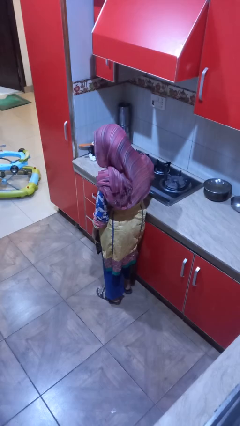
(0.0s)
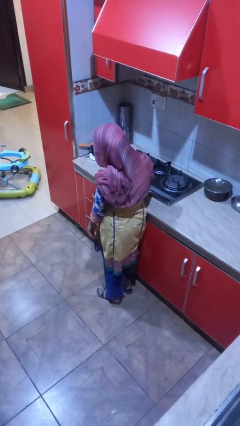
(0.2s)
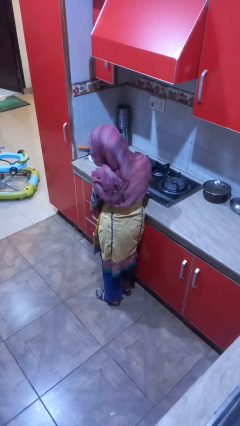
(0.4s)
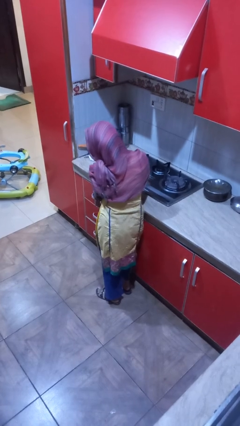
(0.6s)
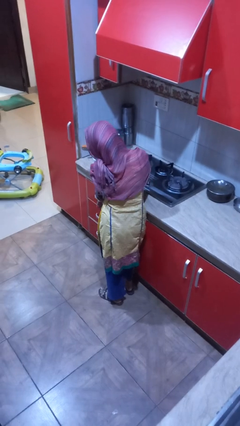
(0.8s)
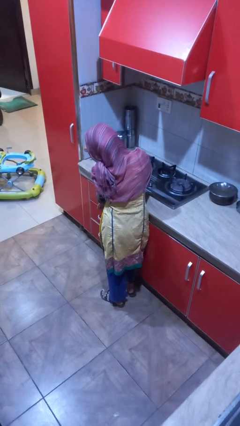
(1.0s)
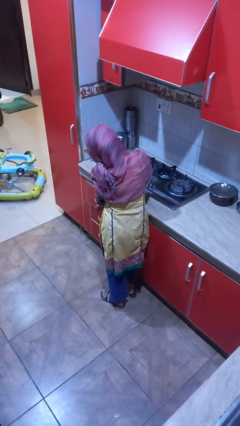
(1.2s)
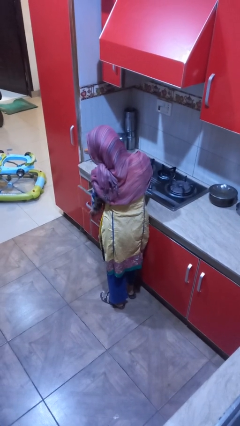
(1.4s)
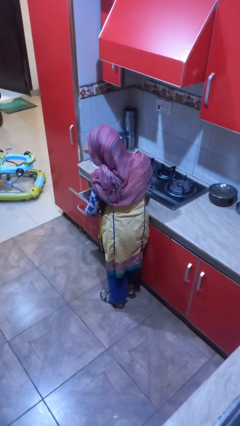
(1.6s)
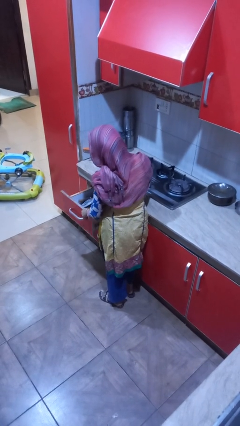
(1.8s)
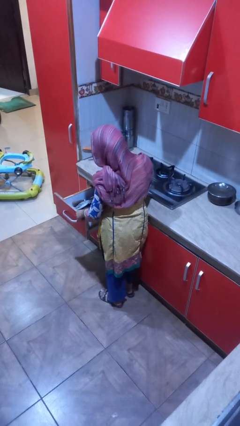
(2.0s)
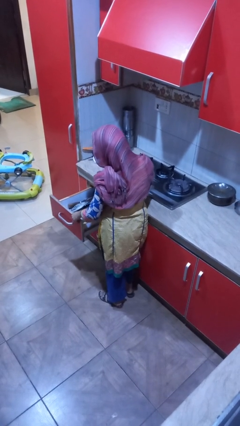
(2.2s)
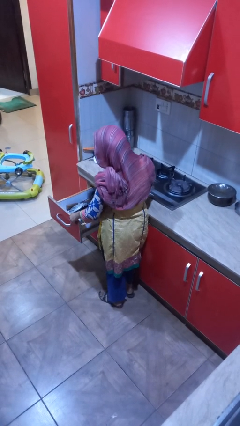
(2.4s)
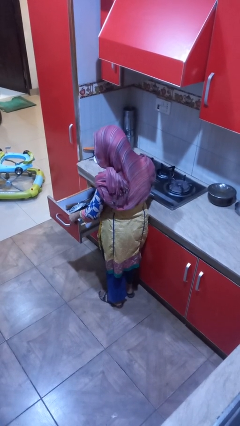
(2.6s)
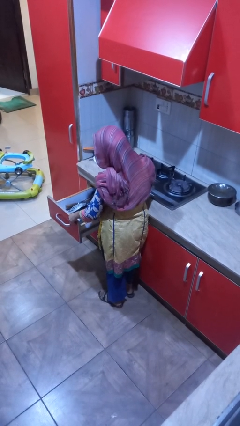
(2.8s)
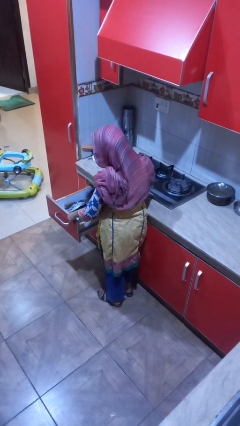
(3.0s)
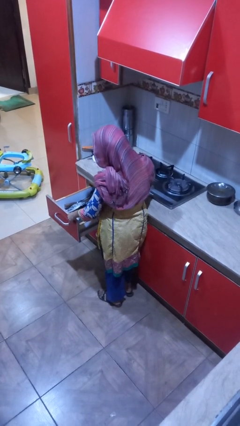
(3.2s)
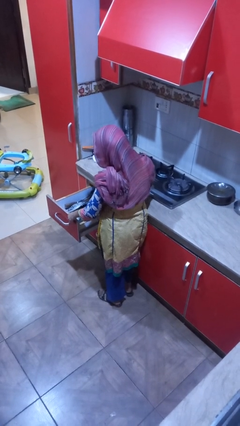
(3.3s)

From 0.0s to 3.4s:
person opens kitchen drawer

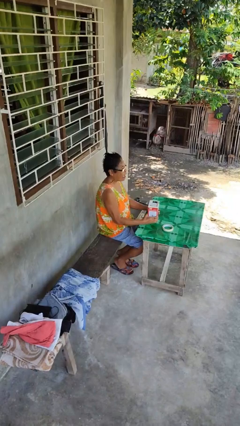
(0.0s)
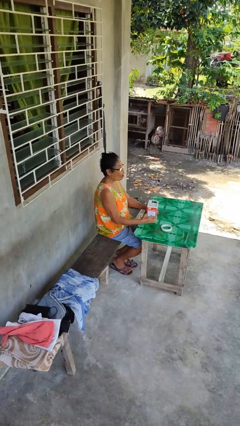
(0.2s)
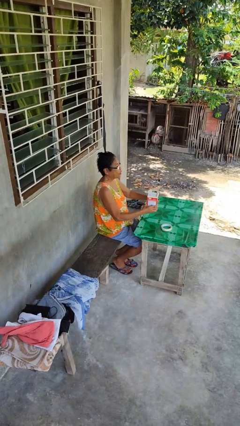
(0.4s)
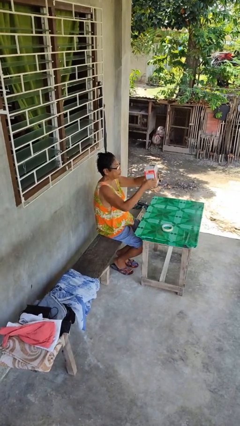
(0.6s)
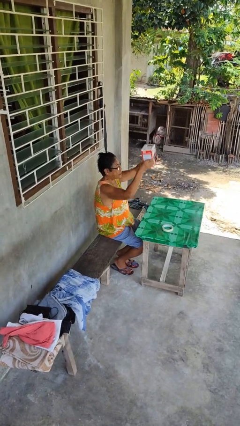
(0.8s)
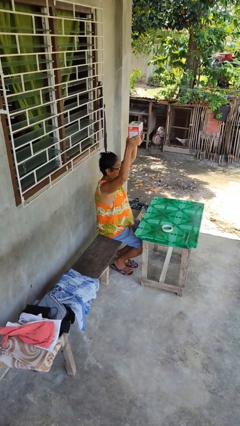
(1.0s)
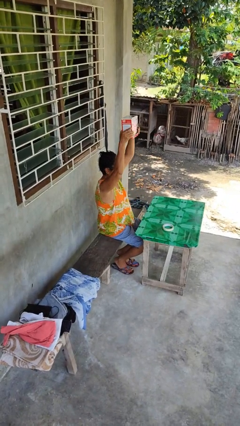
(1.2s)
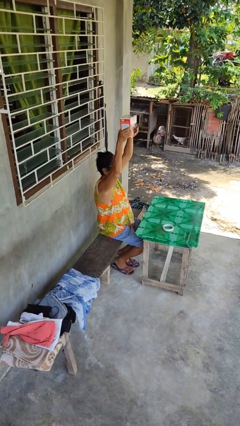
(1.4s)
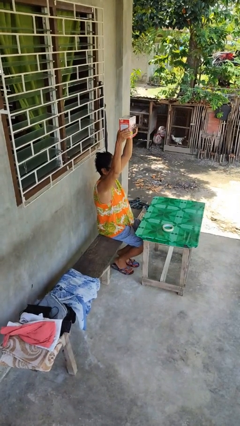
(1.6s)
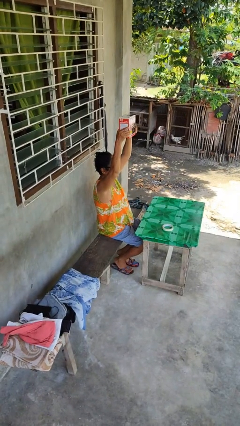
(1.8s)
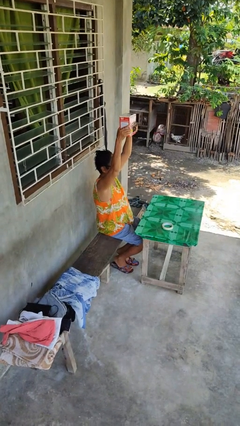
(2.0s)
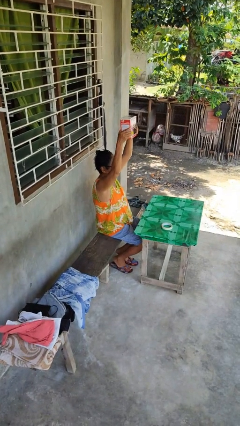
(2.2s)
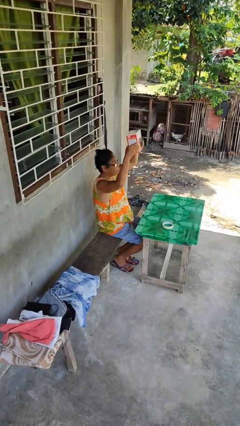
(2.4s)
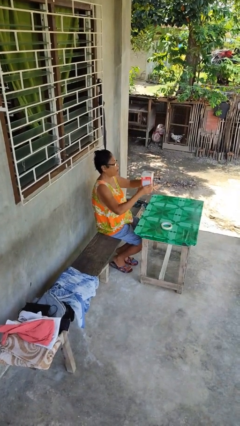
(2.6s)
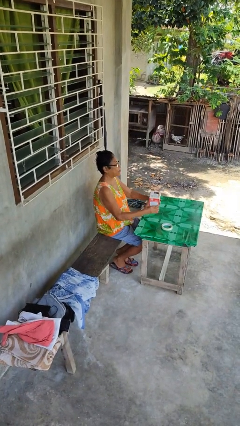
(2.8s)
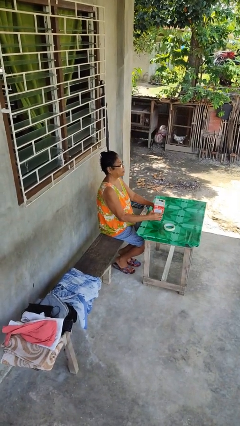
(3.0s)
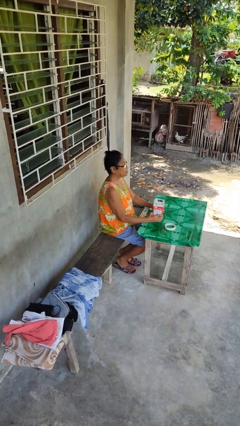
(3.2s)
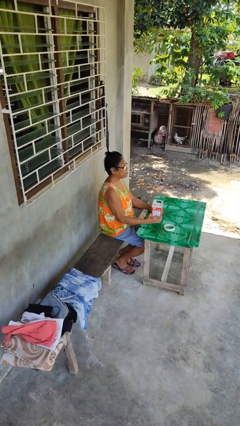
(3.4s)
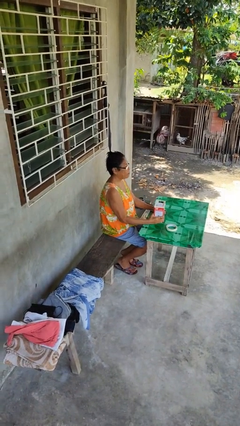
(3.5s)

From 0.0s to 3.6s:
person holds object above head

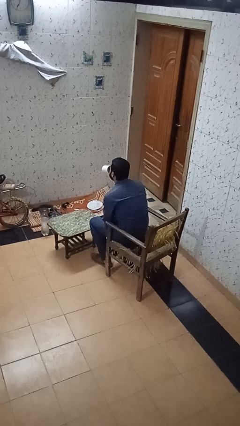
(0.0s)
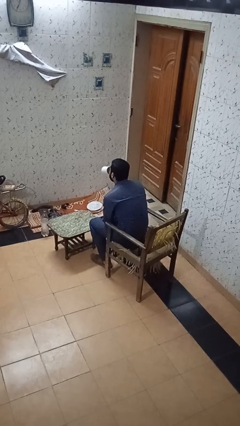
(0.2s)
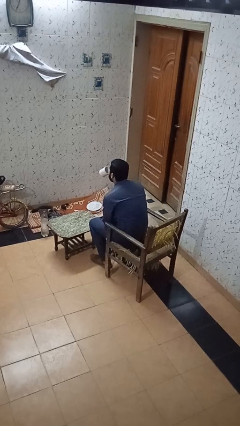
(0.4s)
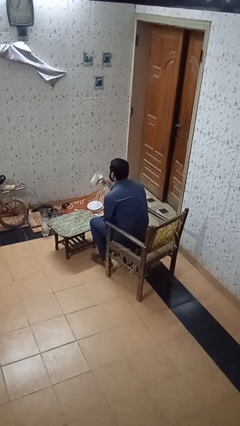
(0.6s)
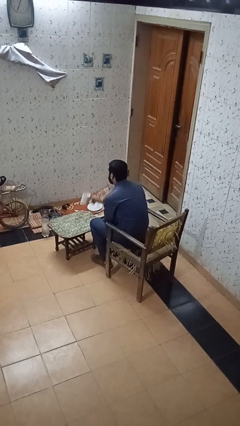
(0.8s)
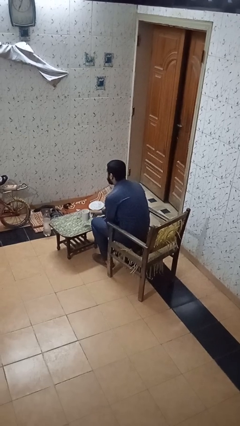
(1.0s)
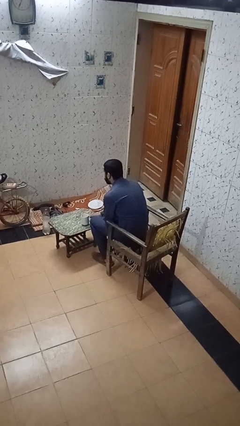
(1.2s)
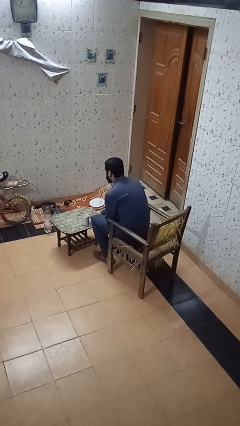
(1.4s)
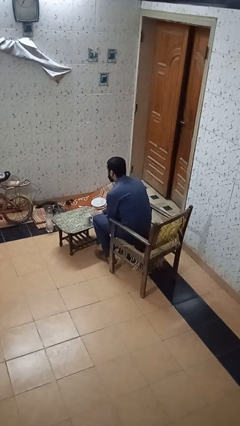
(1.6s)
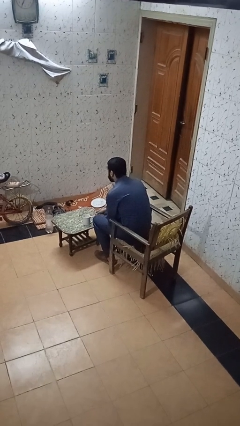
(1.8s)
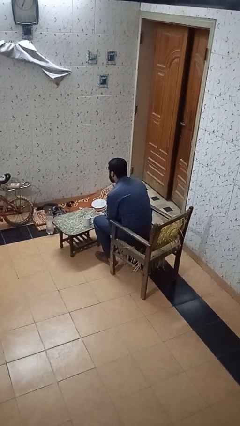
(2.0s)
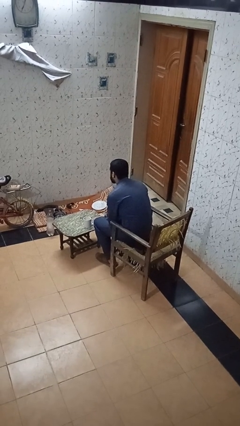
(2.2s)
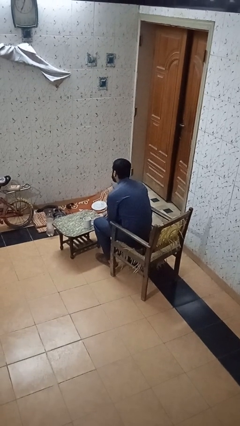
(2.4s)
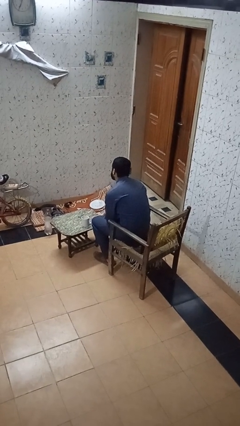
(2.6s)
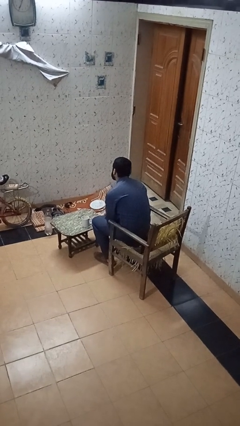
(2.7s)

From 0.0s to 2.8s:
person puts down object on table

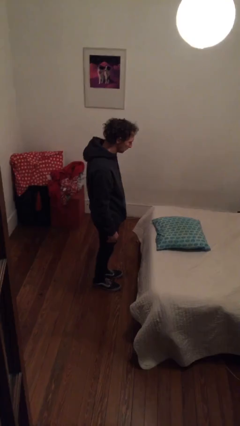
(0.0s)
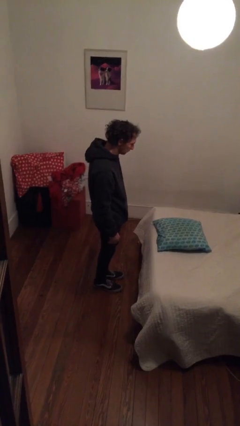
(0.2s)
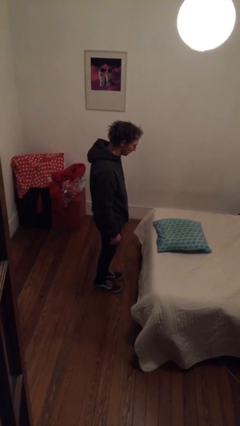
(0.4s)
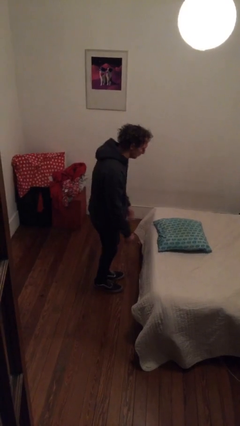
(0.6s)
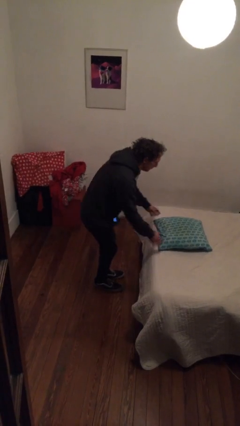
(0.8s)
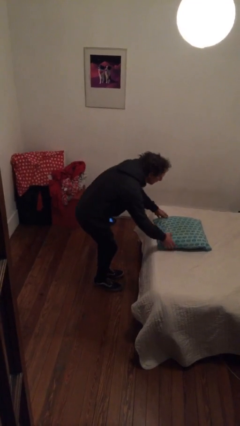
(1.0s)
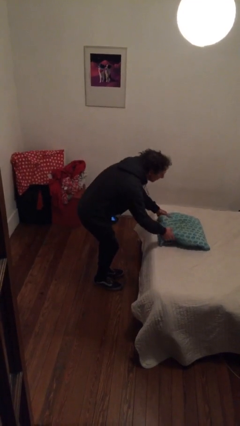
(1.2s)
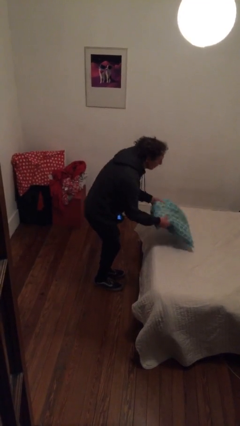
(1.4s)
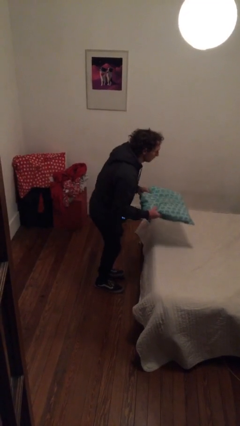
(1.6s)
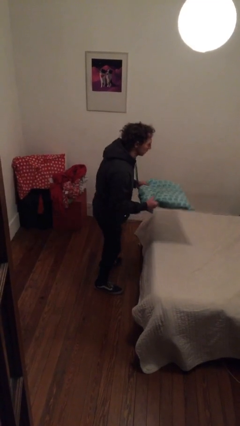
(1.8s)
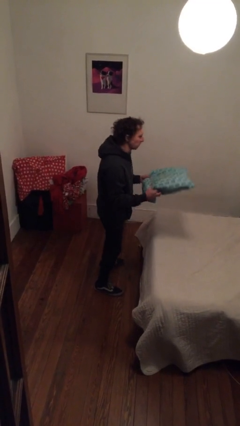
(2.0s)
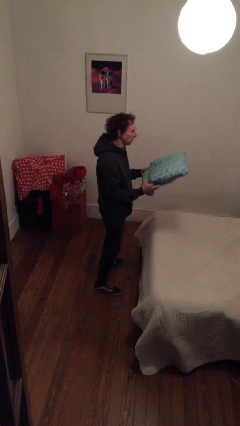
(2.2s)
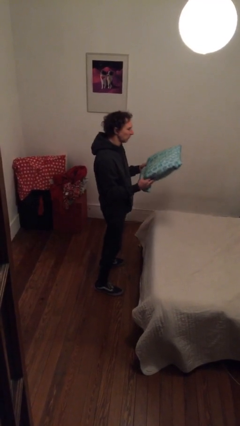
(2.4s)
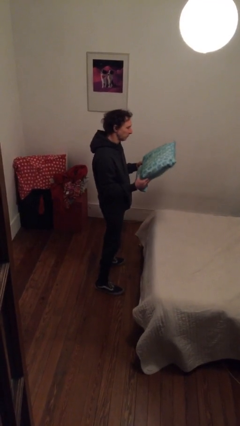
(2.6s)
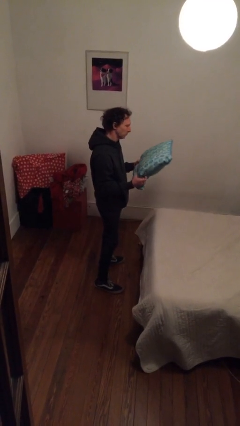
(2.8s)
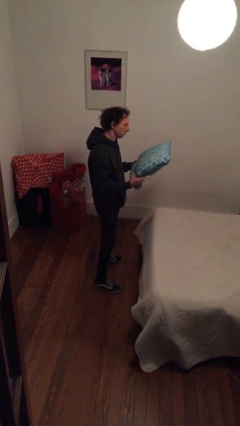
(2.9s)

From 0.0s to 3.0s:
person picks up object from bed

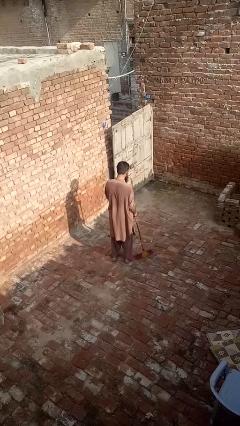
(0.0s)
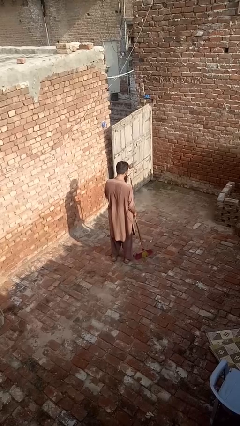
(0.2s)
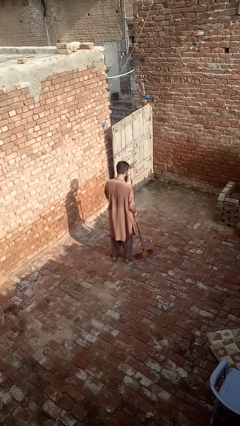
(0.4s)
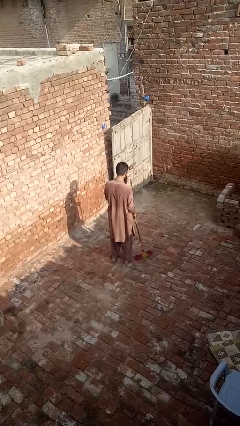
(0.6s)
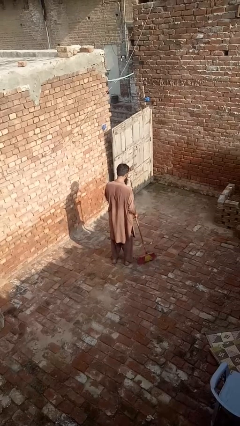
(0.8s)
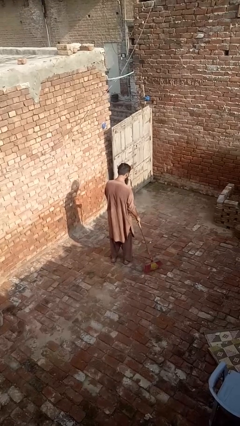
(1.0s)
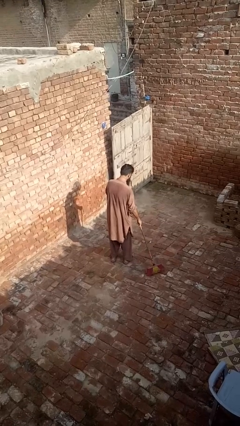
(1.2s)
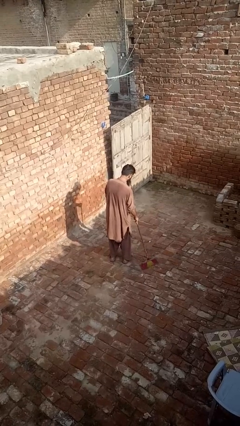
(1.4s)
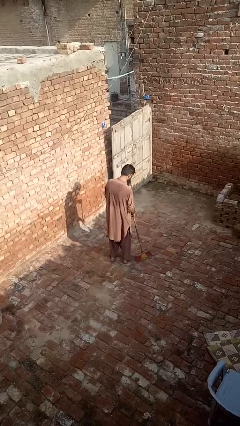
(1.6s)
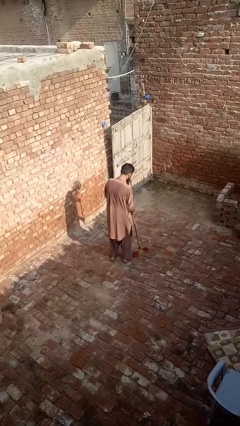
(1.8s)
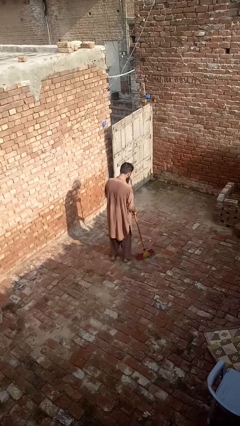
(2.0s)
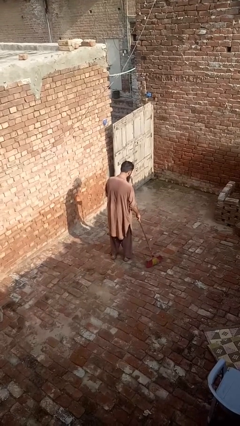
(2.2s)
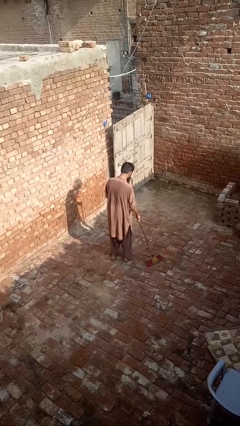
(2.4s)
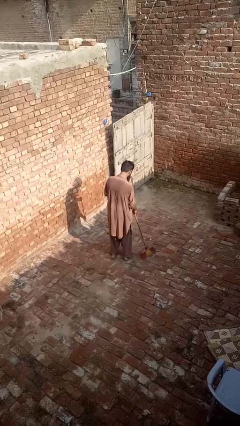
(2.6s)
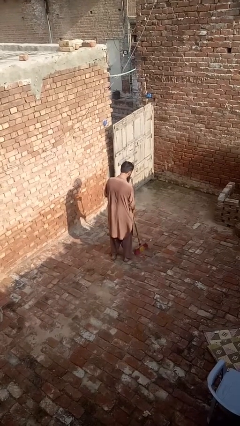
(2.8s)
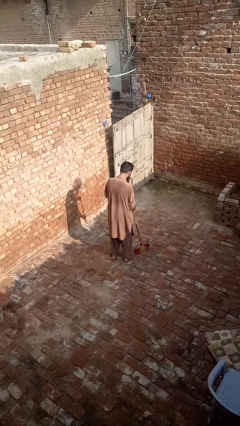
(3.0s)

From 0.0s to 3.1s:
person sweeps floor

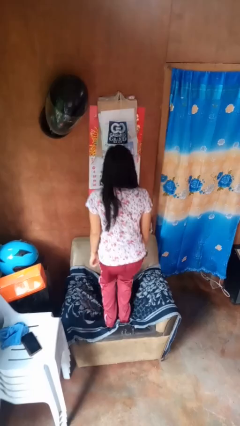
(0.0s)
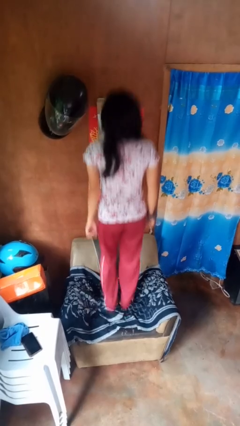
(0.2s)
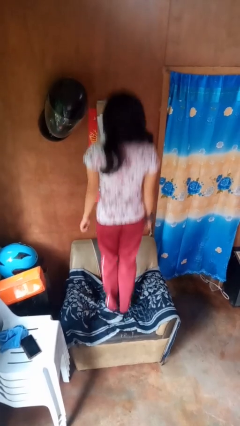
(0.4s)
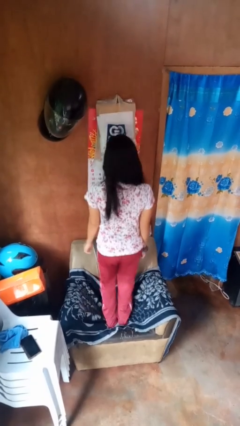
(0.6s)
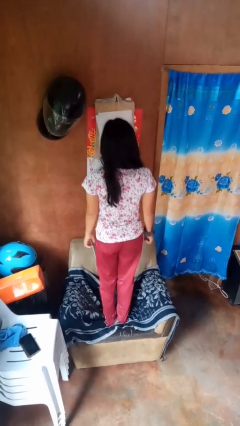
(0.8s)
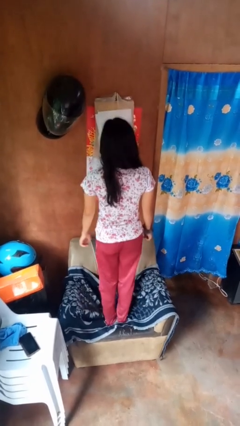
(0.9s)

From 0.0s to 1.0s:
person jumps on couch

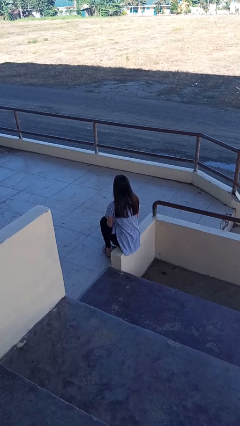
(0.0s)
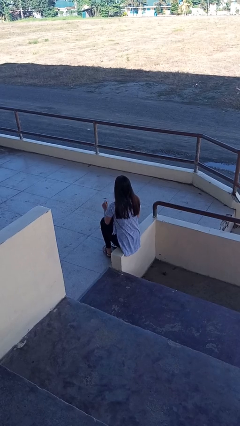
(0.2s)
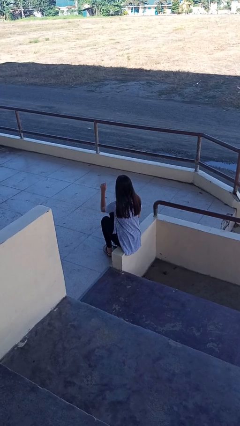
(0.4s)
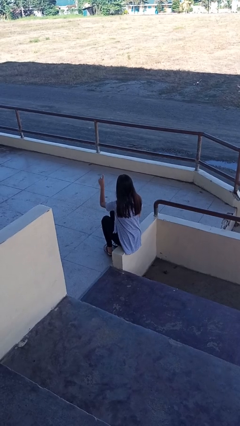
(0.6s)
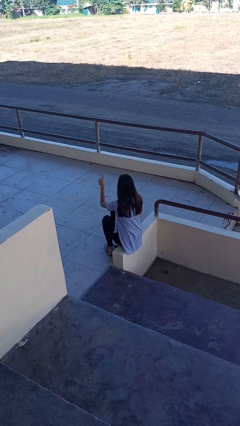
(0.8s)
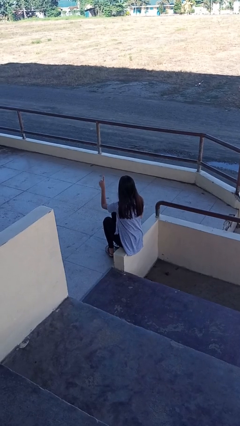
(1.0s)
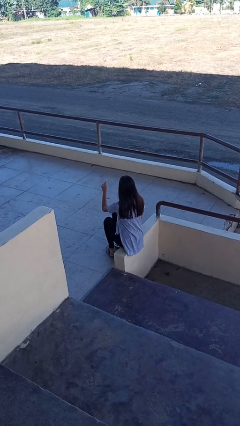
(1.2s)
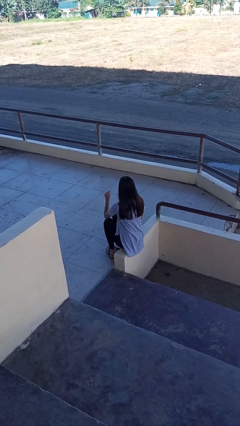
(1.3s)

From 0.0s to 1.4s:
person gestures number one
